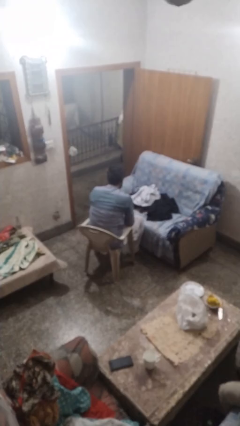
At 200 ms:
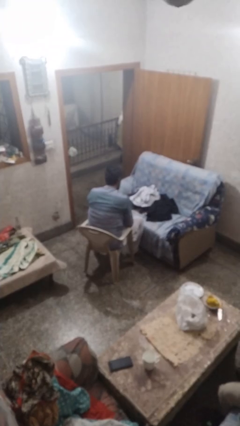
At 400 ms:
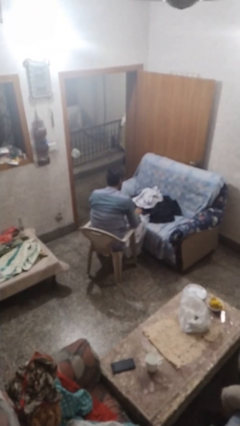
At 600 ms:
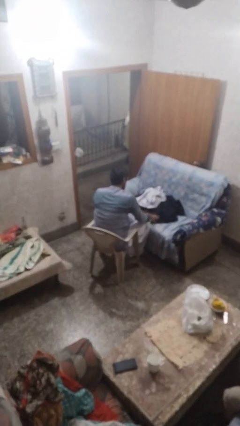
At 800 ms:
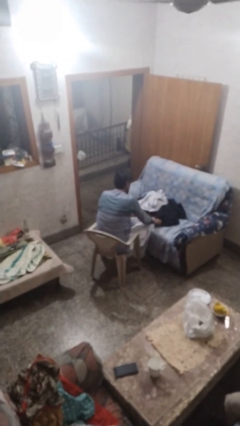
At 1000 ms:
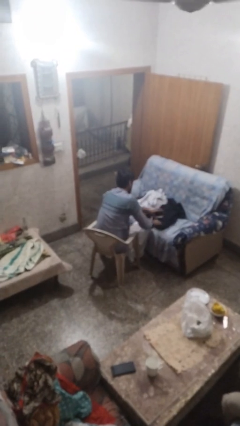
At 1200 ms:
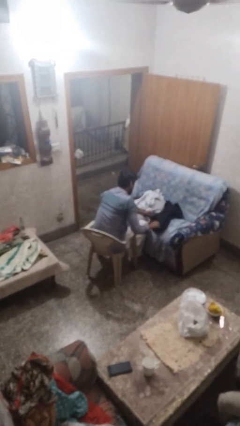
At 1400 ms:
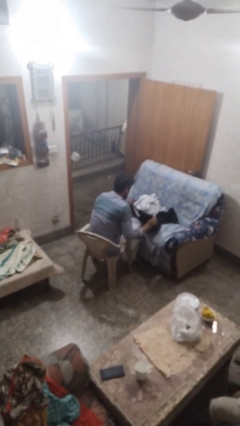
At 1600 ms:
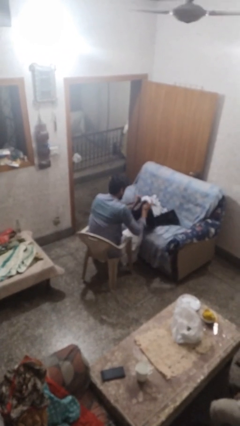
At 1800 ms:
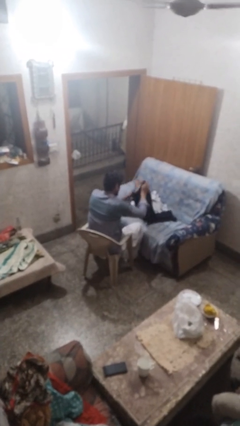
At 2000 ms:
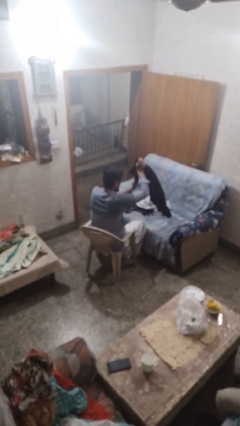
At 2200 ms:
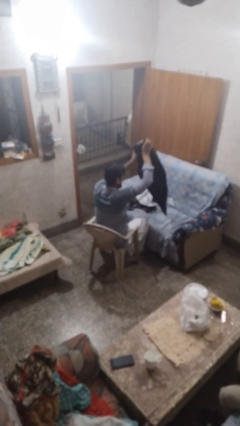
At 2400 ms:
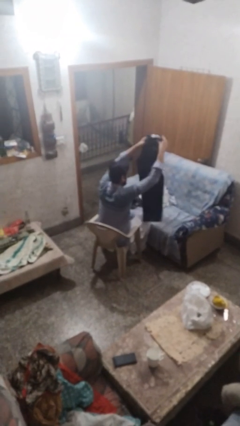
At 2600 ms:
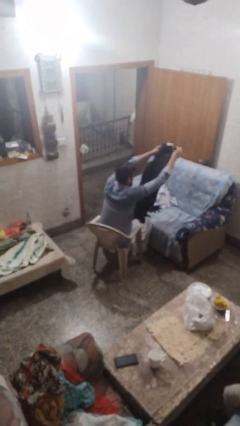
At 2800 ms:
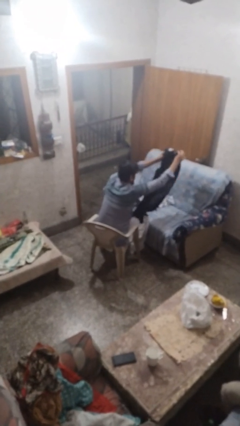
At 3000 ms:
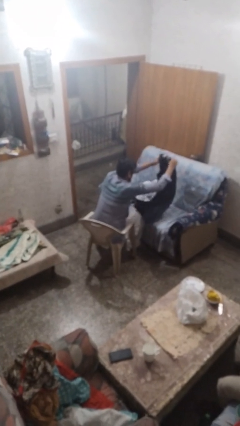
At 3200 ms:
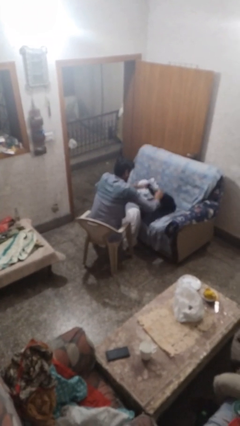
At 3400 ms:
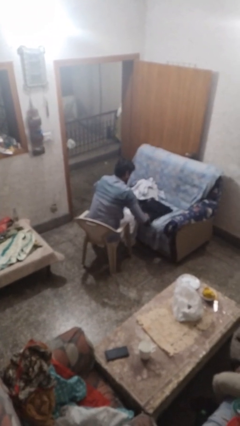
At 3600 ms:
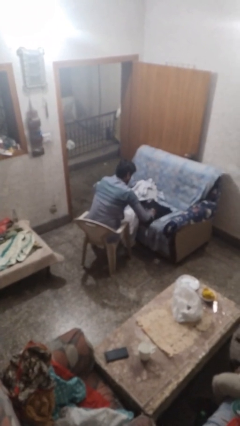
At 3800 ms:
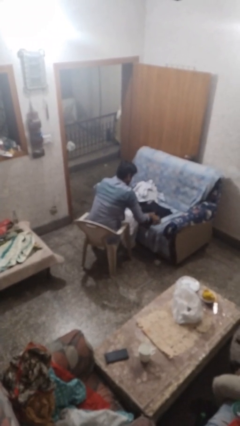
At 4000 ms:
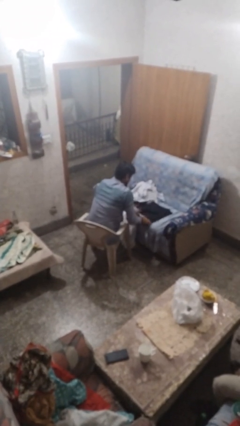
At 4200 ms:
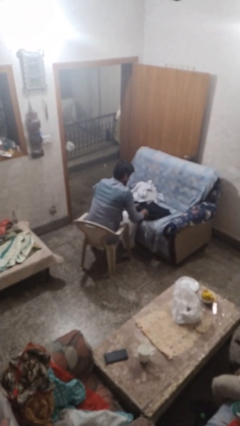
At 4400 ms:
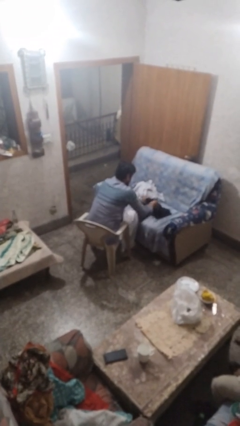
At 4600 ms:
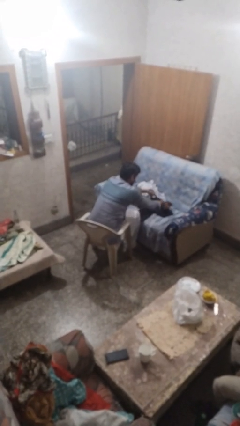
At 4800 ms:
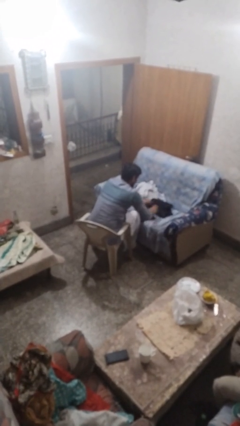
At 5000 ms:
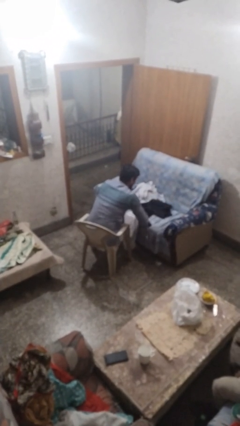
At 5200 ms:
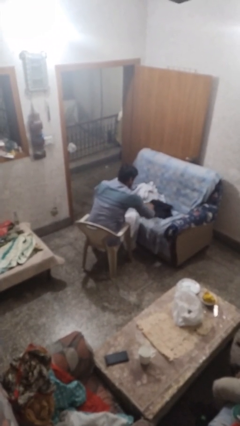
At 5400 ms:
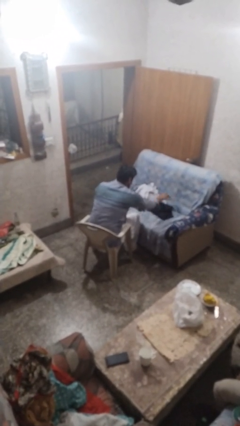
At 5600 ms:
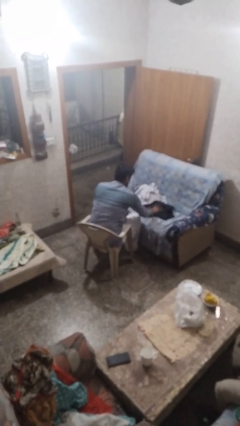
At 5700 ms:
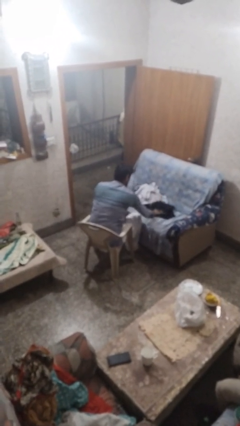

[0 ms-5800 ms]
person folds pants

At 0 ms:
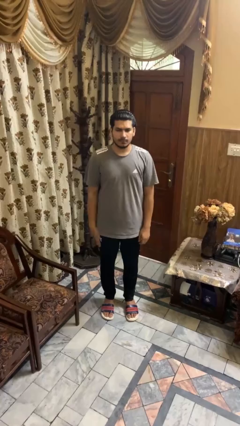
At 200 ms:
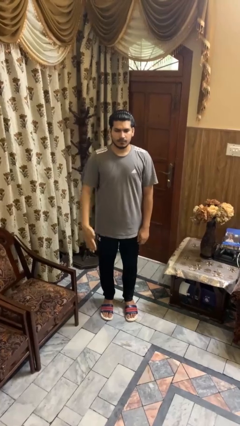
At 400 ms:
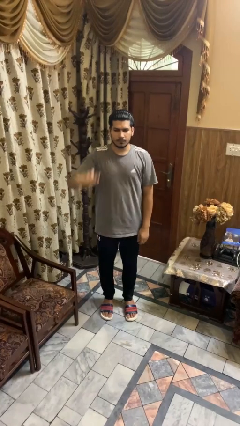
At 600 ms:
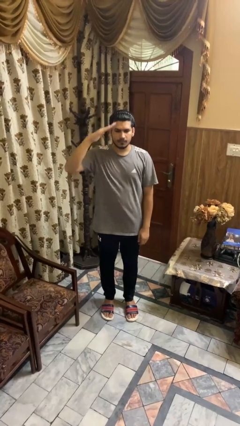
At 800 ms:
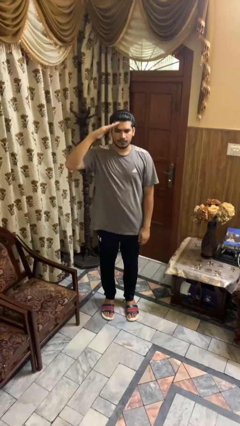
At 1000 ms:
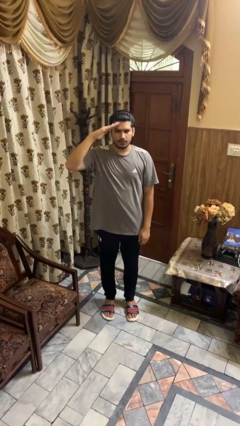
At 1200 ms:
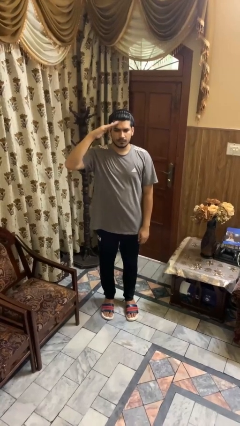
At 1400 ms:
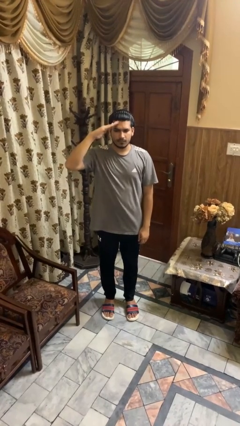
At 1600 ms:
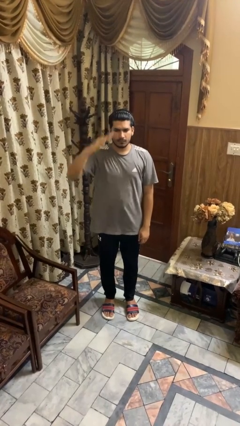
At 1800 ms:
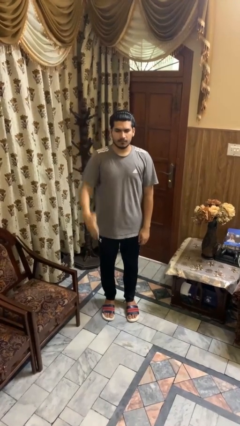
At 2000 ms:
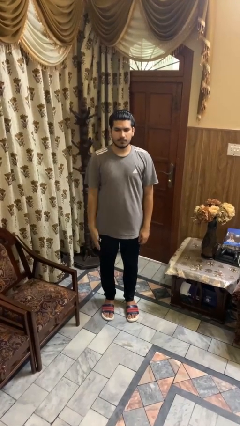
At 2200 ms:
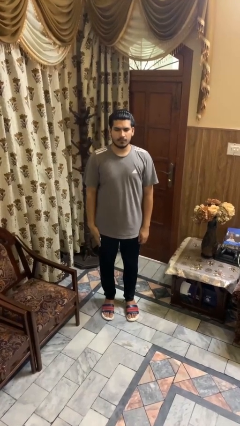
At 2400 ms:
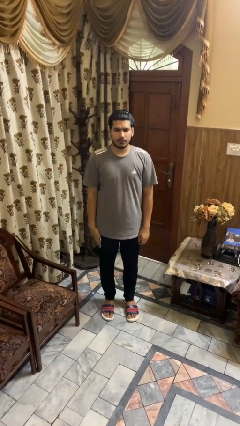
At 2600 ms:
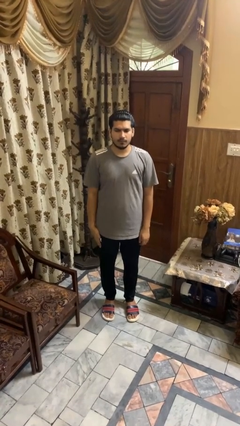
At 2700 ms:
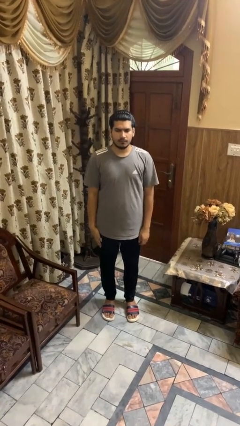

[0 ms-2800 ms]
person salutes

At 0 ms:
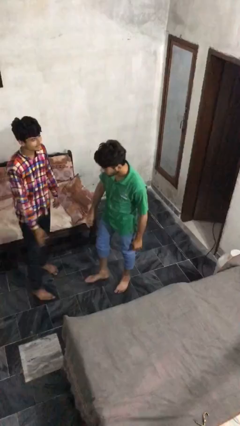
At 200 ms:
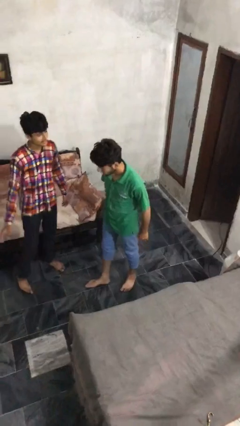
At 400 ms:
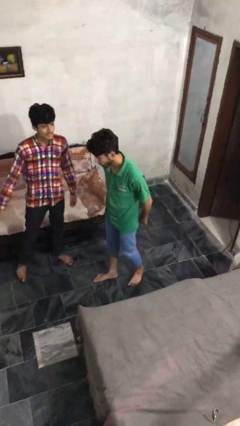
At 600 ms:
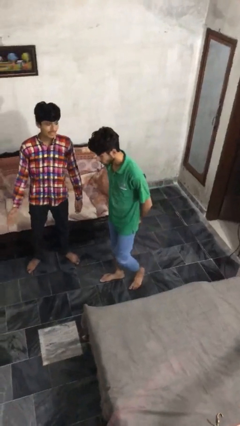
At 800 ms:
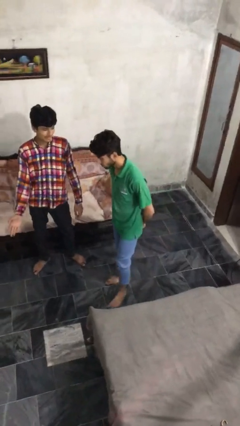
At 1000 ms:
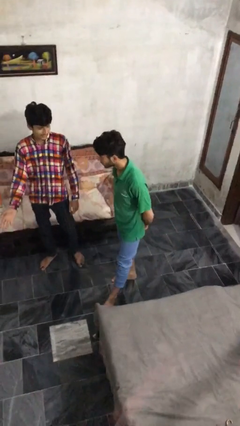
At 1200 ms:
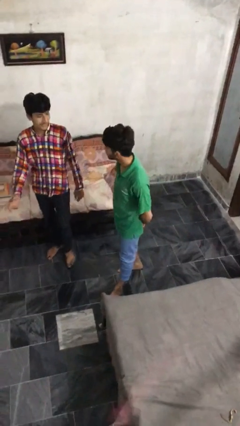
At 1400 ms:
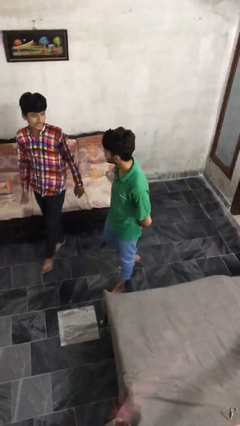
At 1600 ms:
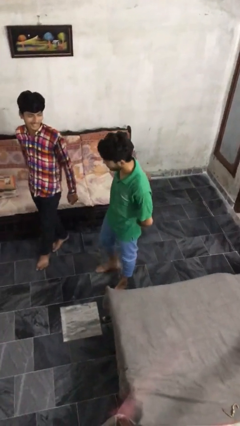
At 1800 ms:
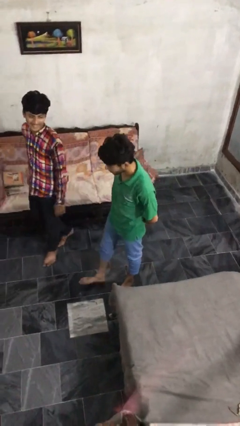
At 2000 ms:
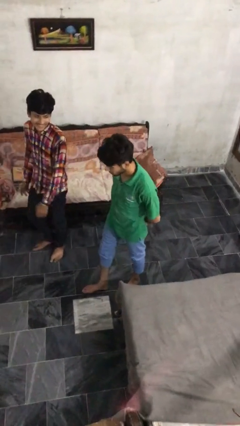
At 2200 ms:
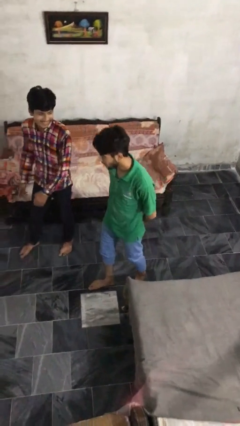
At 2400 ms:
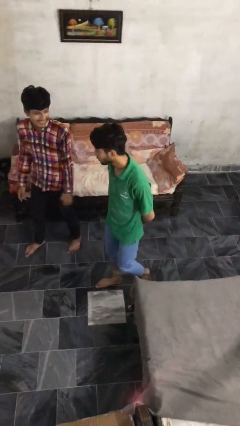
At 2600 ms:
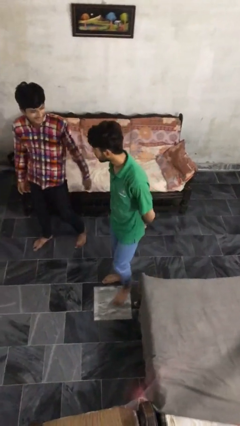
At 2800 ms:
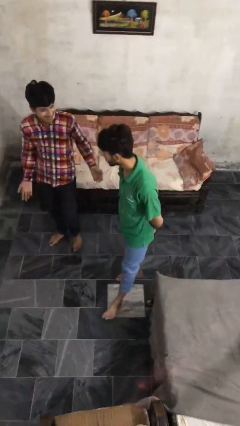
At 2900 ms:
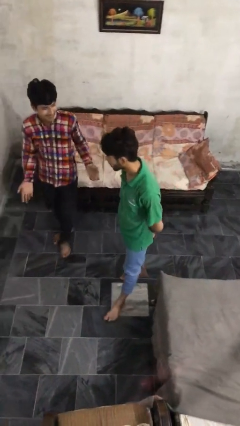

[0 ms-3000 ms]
person talks to person

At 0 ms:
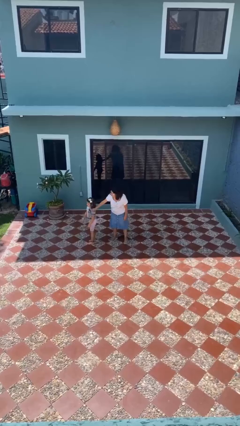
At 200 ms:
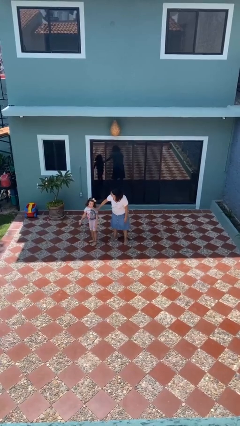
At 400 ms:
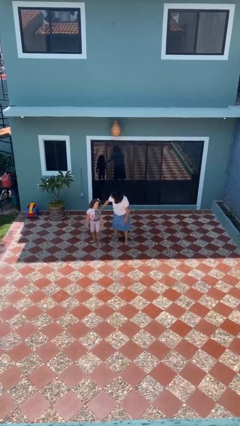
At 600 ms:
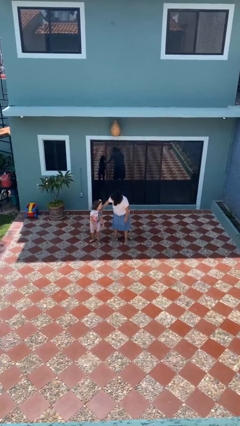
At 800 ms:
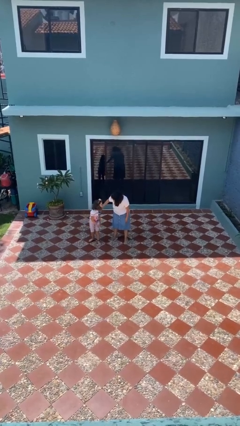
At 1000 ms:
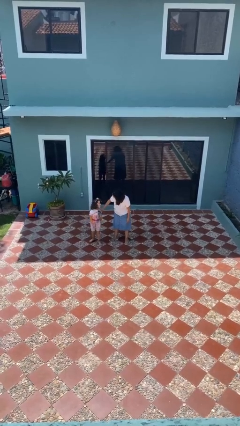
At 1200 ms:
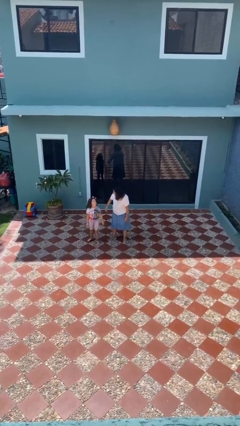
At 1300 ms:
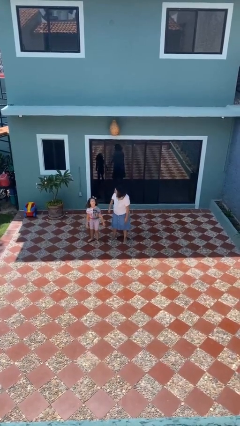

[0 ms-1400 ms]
person spins person around

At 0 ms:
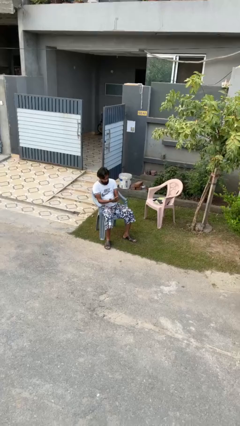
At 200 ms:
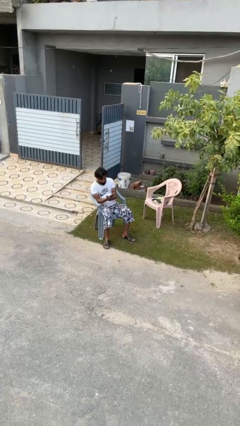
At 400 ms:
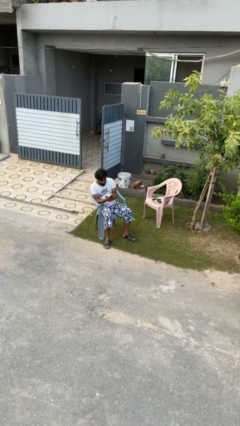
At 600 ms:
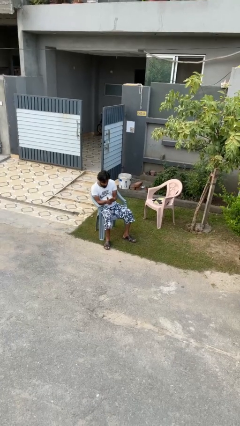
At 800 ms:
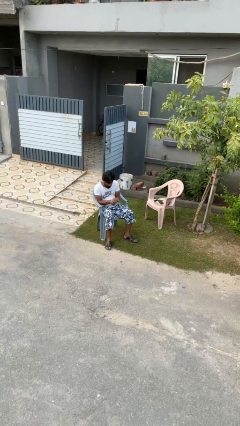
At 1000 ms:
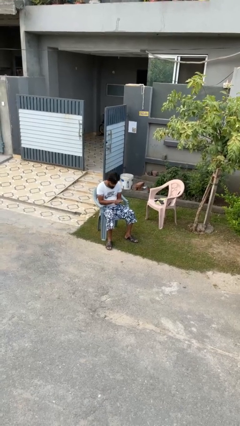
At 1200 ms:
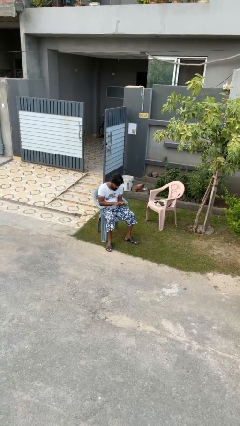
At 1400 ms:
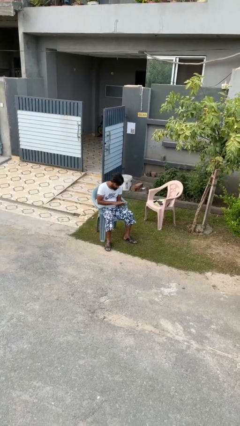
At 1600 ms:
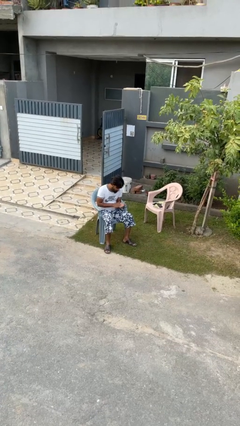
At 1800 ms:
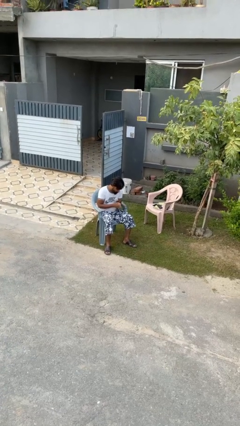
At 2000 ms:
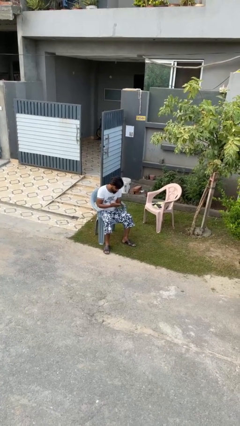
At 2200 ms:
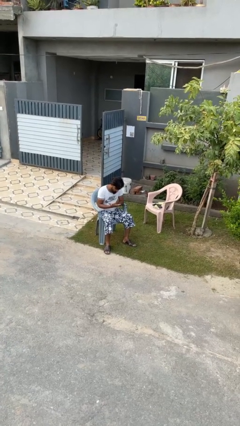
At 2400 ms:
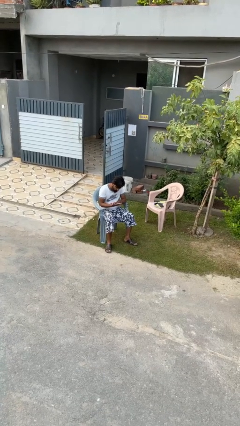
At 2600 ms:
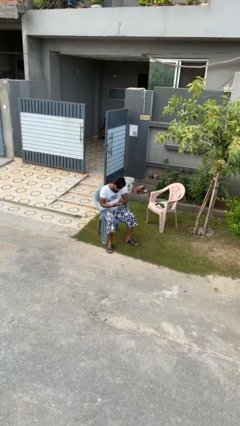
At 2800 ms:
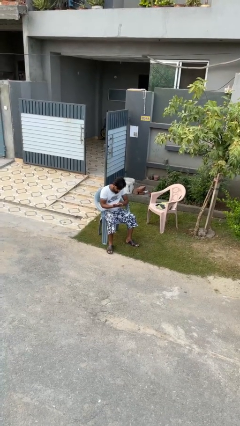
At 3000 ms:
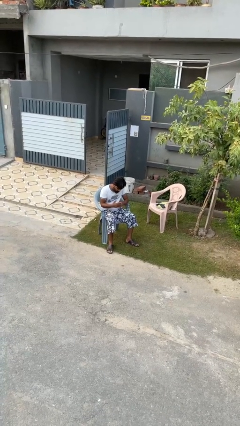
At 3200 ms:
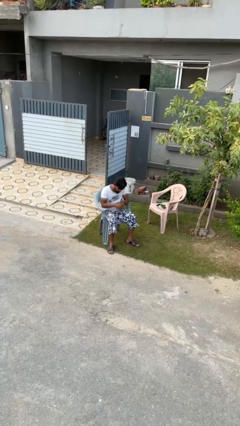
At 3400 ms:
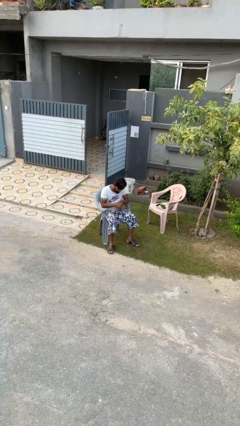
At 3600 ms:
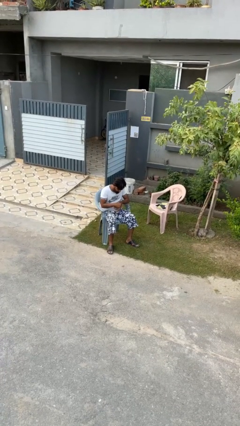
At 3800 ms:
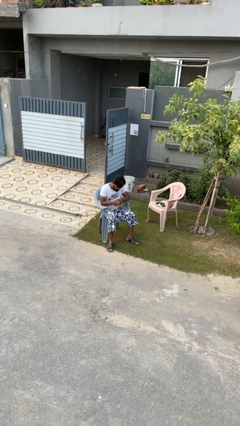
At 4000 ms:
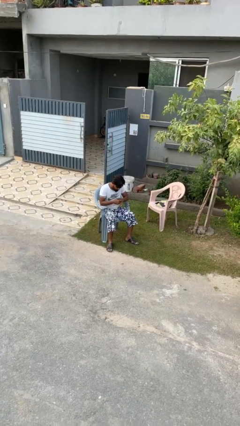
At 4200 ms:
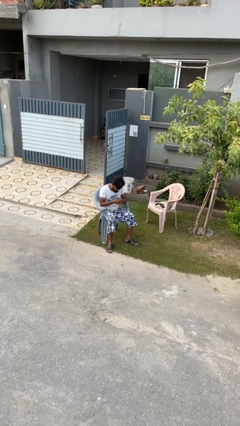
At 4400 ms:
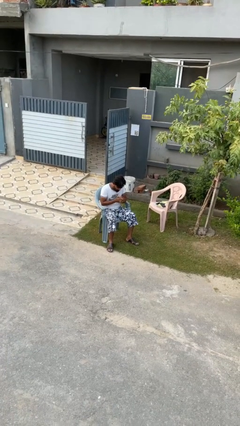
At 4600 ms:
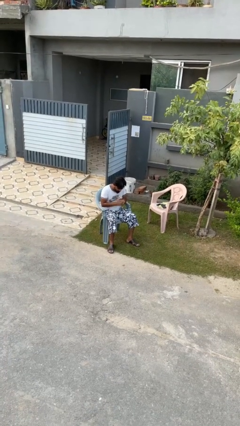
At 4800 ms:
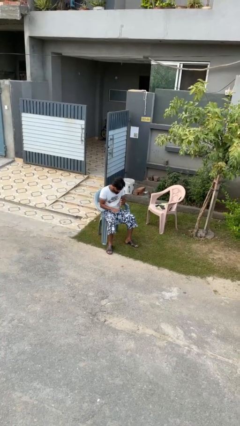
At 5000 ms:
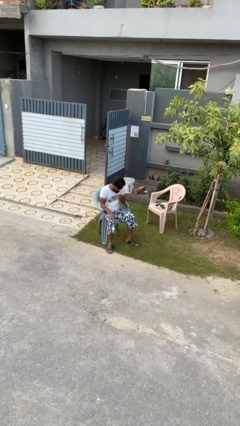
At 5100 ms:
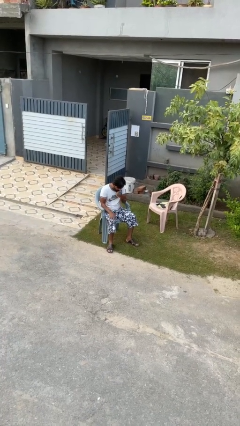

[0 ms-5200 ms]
person looks at hands in lap
